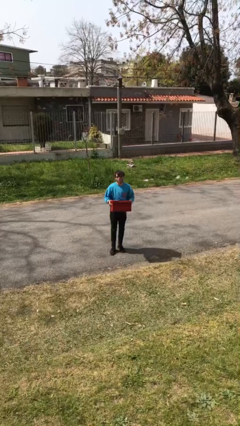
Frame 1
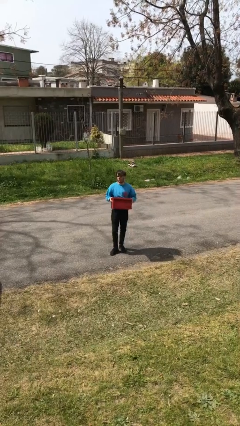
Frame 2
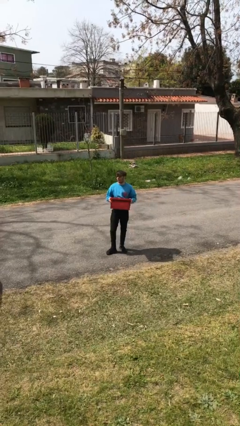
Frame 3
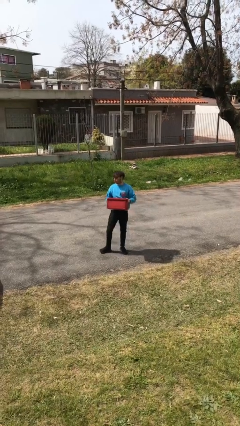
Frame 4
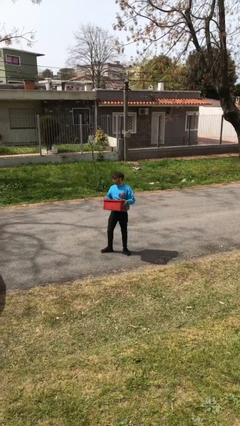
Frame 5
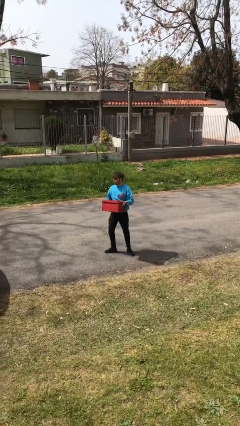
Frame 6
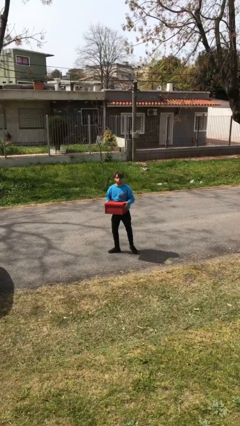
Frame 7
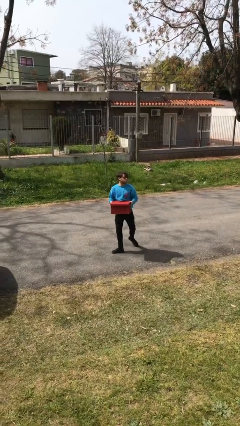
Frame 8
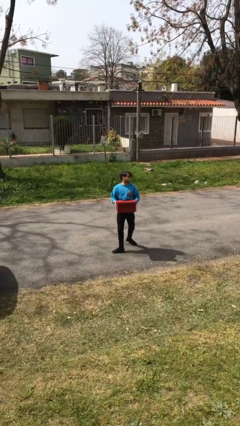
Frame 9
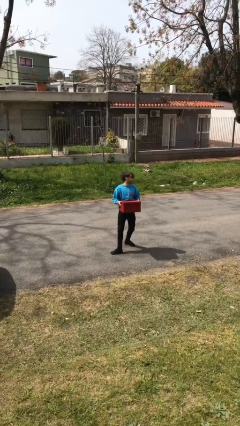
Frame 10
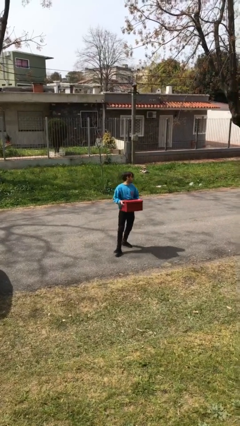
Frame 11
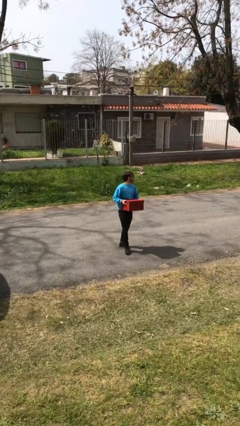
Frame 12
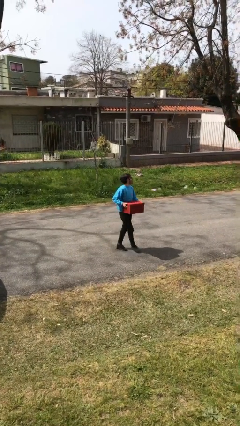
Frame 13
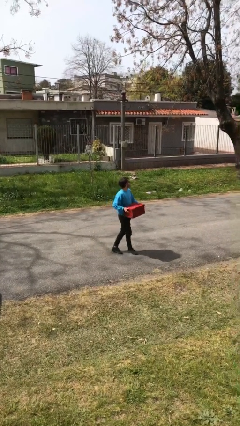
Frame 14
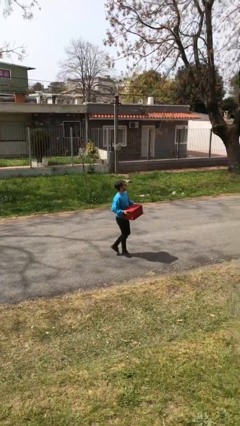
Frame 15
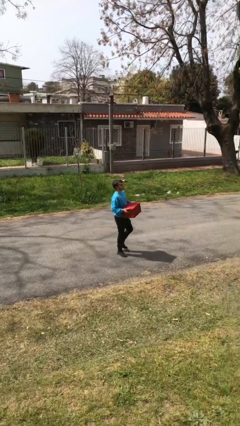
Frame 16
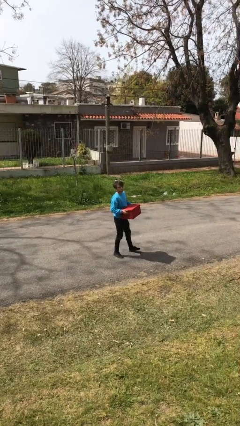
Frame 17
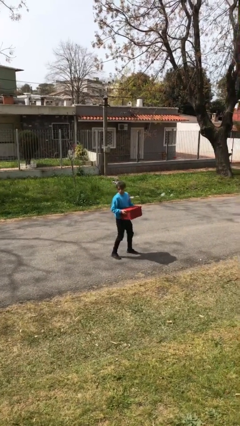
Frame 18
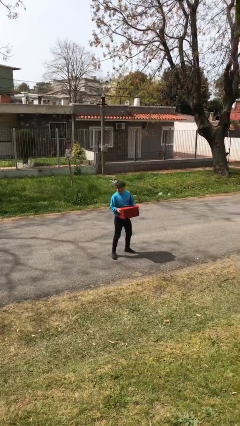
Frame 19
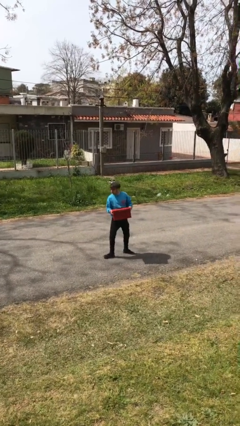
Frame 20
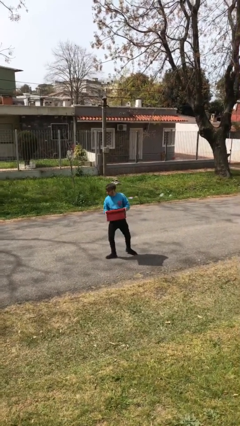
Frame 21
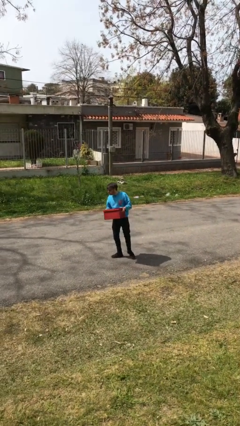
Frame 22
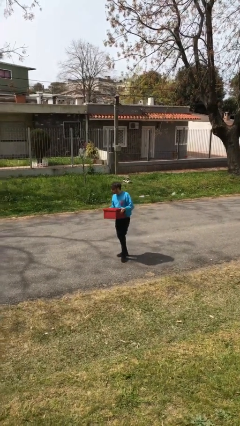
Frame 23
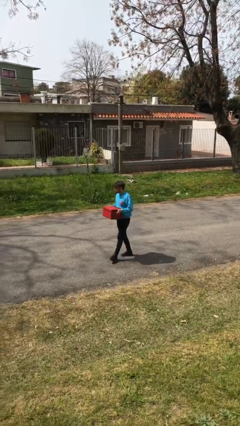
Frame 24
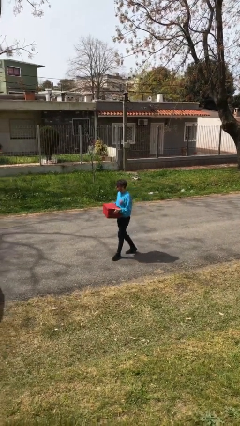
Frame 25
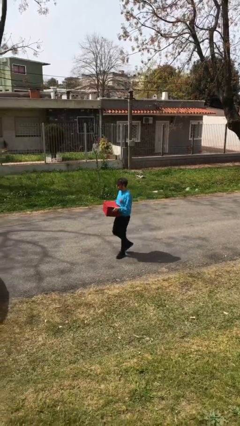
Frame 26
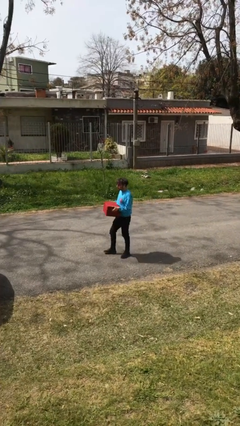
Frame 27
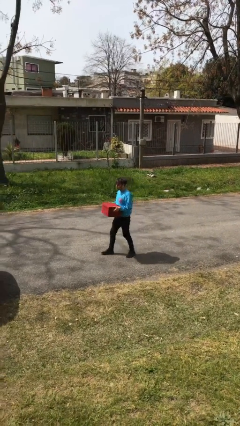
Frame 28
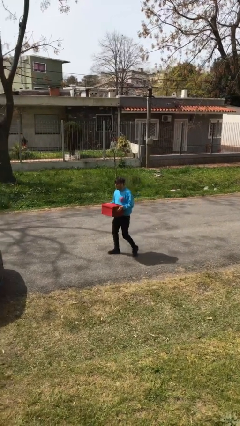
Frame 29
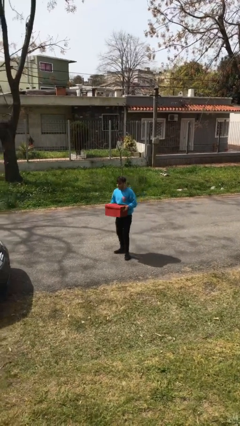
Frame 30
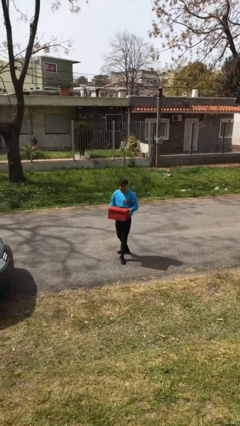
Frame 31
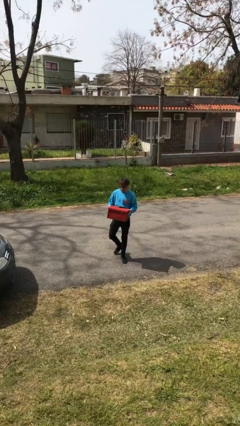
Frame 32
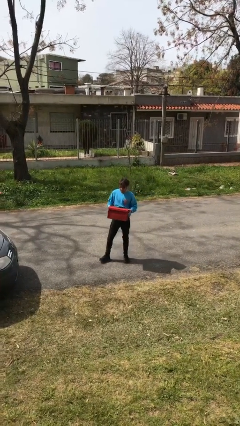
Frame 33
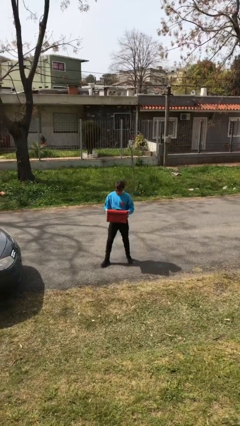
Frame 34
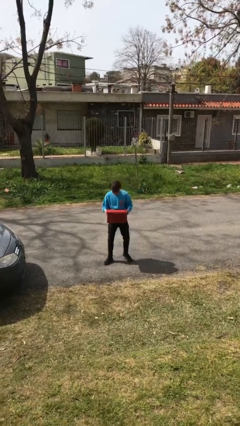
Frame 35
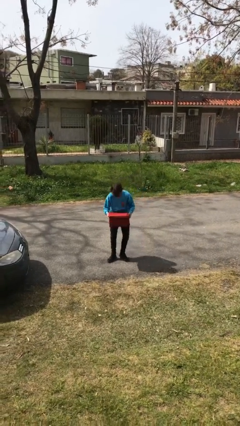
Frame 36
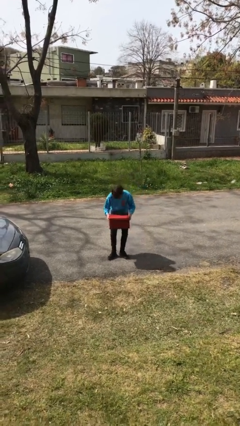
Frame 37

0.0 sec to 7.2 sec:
person carries heavy object

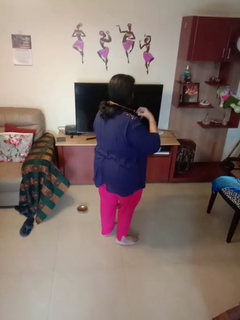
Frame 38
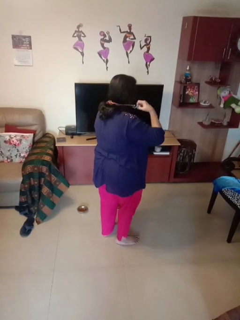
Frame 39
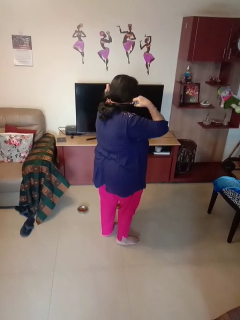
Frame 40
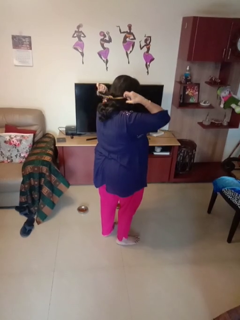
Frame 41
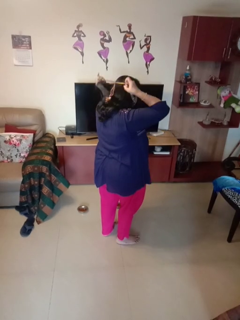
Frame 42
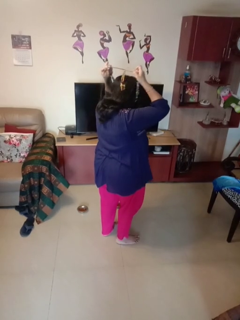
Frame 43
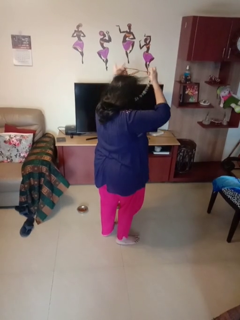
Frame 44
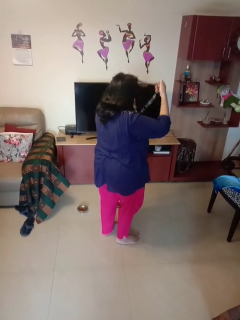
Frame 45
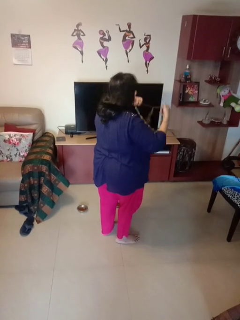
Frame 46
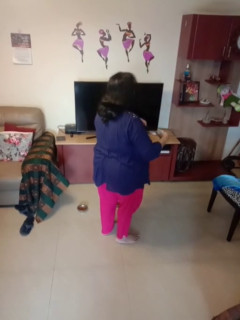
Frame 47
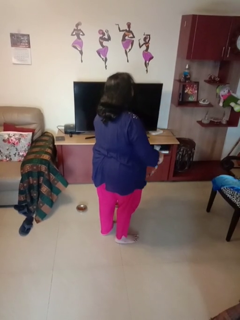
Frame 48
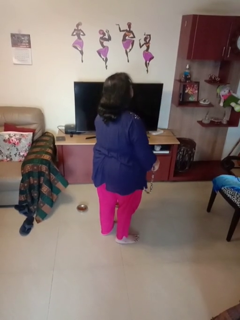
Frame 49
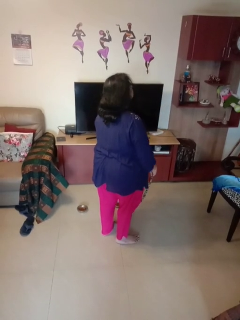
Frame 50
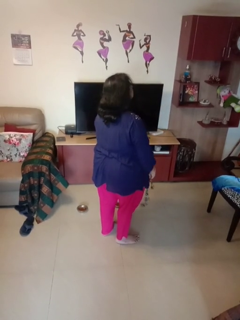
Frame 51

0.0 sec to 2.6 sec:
person takes off necklace

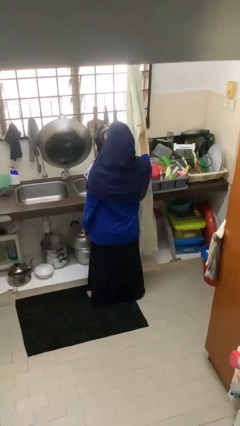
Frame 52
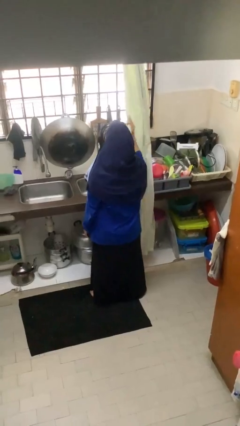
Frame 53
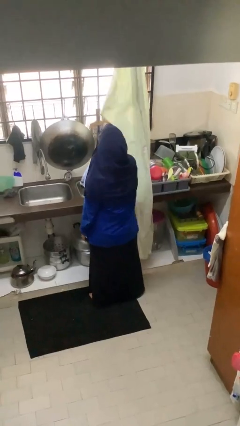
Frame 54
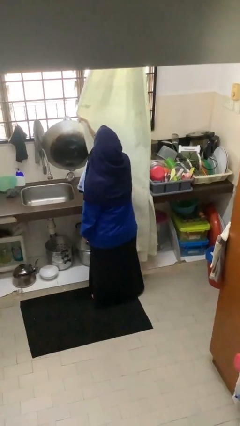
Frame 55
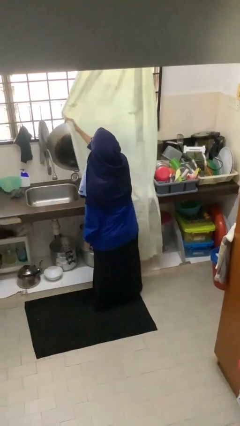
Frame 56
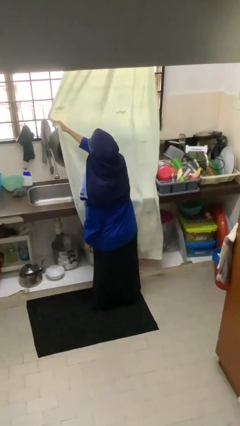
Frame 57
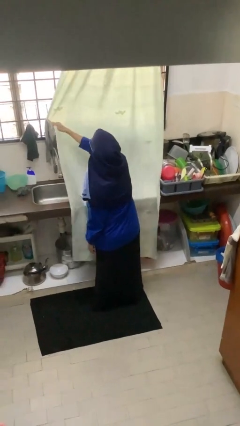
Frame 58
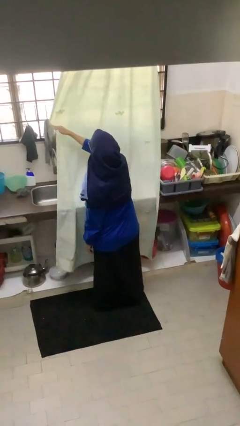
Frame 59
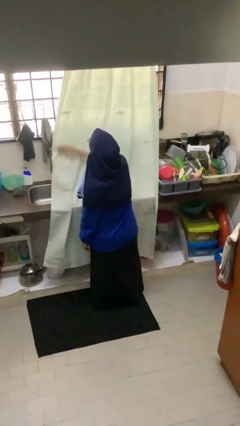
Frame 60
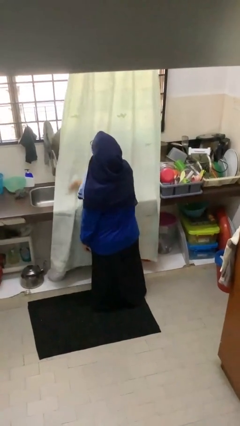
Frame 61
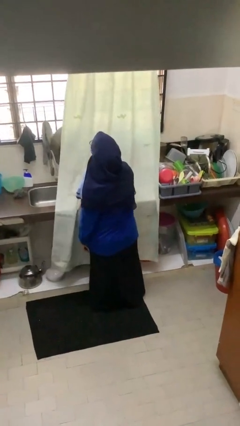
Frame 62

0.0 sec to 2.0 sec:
person closes curtains

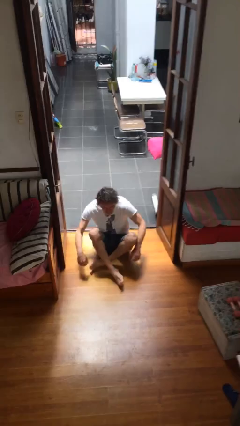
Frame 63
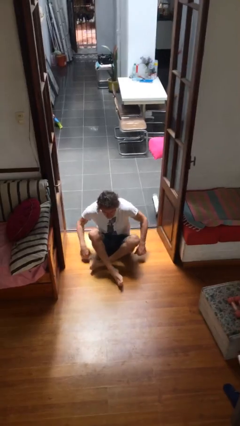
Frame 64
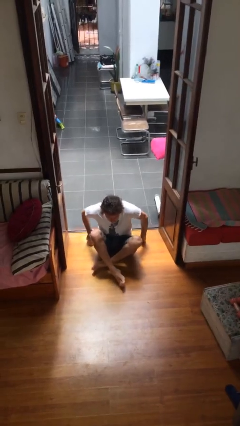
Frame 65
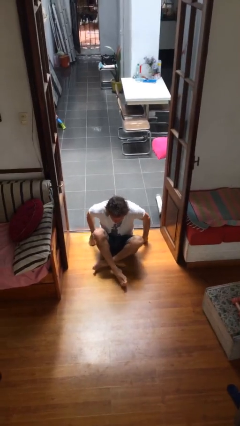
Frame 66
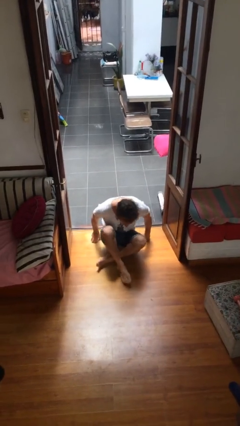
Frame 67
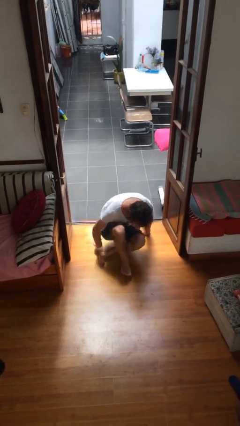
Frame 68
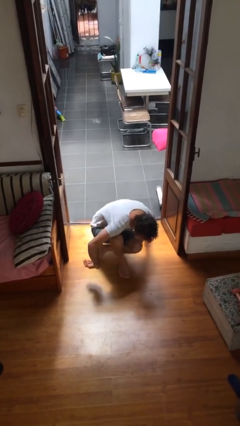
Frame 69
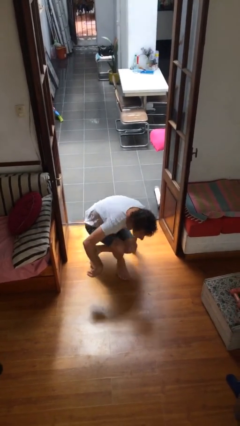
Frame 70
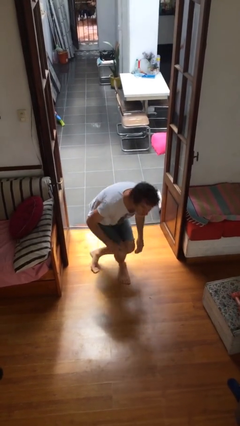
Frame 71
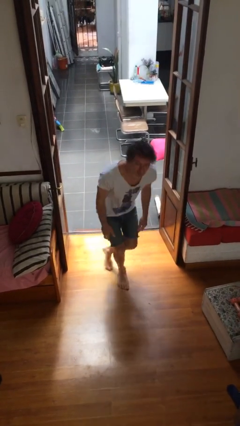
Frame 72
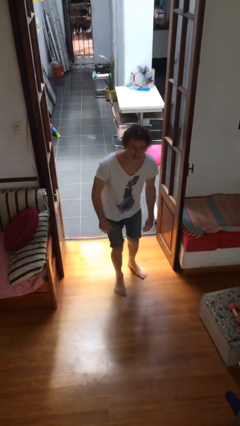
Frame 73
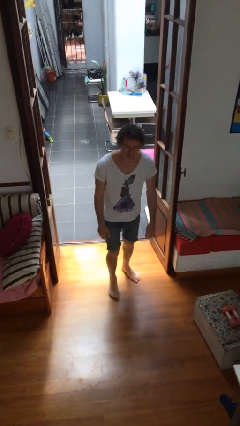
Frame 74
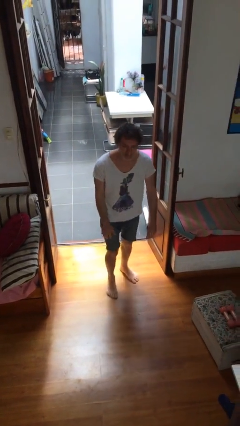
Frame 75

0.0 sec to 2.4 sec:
person stands up

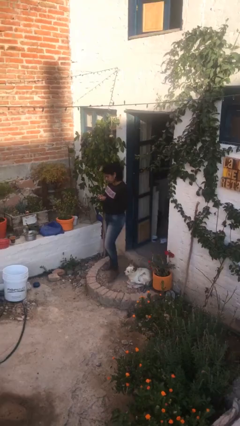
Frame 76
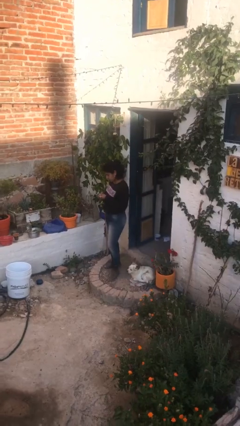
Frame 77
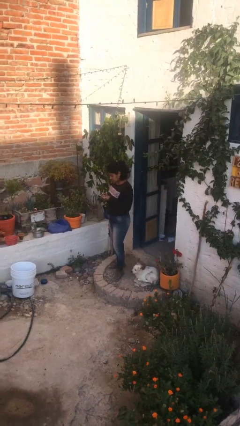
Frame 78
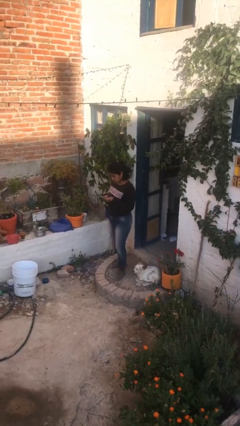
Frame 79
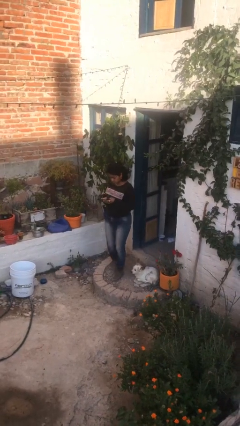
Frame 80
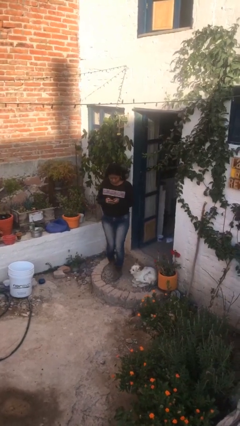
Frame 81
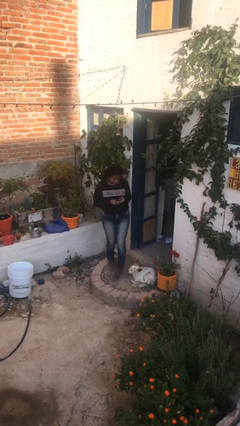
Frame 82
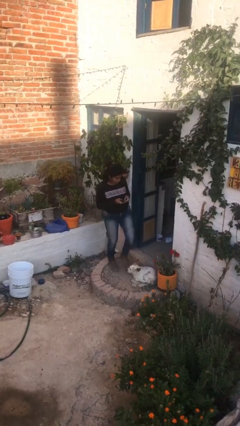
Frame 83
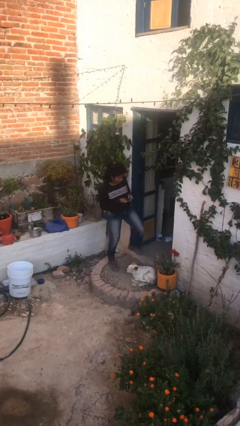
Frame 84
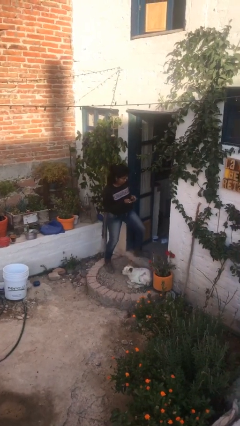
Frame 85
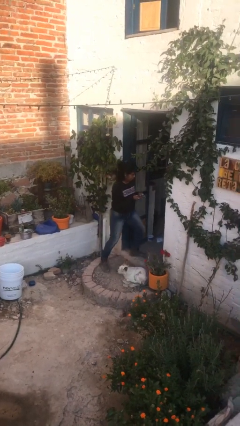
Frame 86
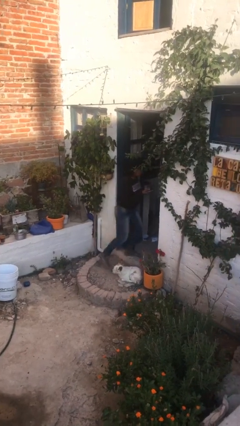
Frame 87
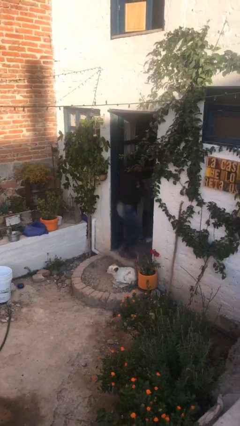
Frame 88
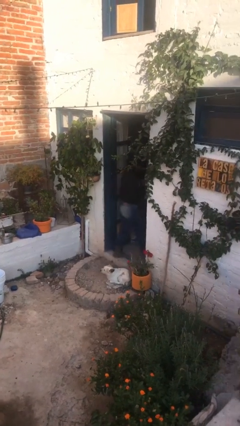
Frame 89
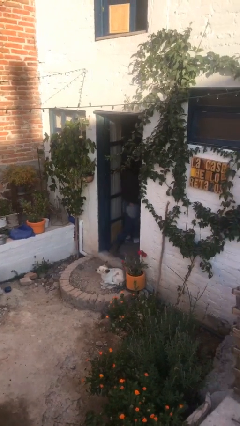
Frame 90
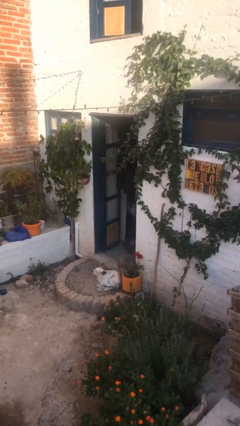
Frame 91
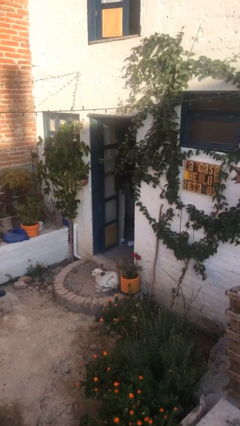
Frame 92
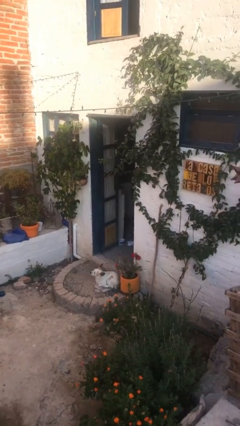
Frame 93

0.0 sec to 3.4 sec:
person exits scene through structure

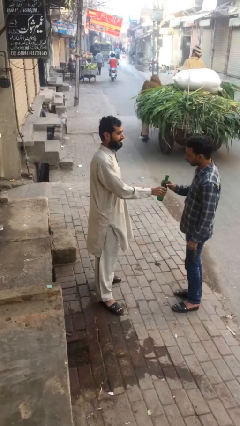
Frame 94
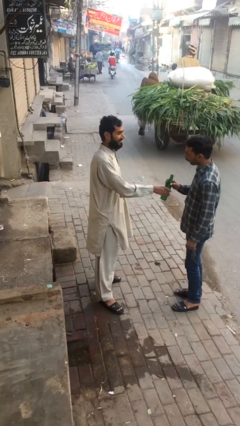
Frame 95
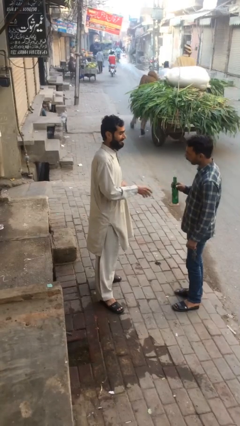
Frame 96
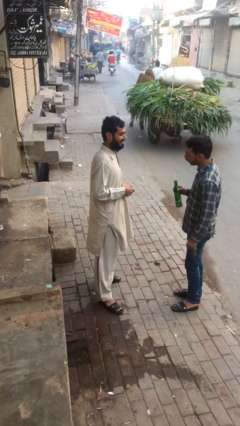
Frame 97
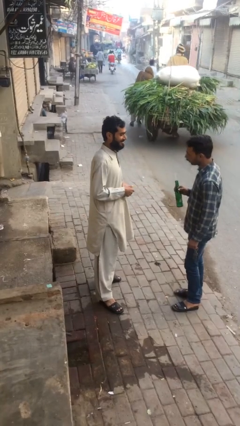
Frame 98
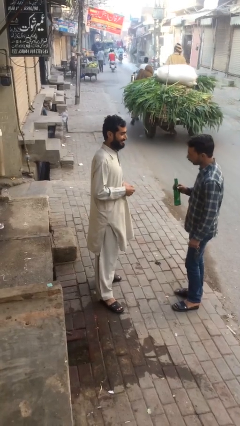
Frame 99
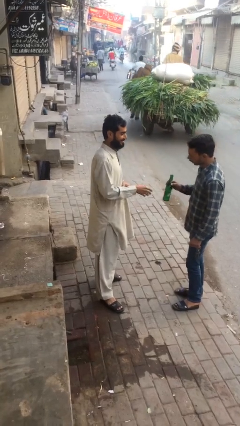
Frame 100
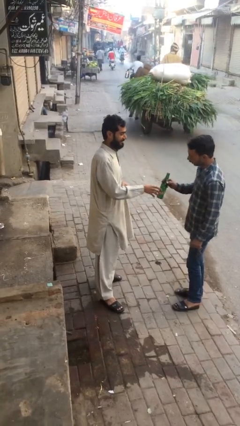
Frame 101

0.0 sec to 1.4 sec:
person transfers object to person
